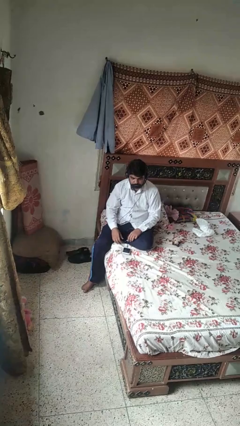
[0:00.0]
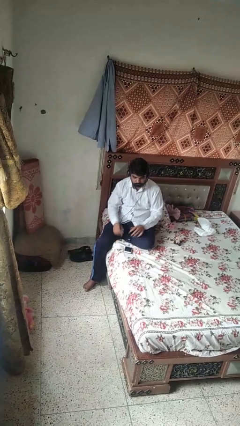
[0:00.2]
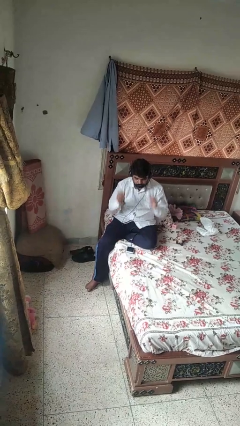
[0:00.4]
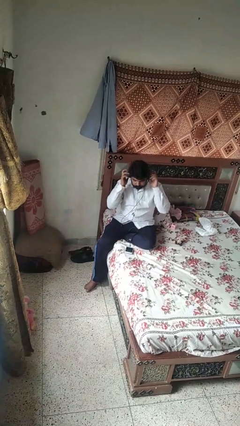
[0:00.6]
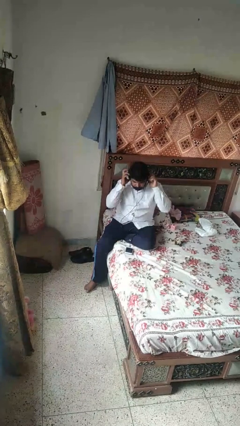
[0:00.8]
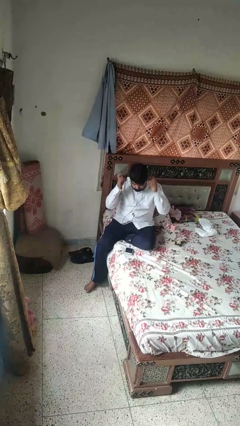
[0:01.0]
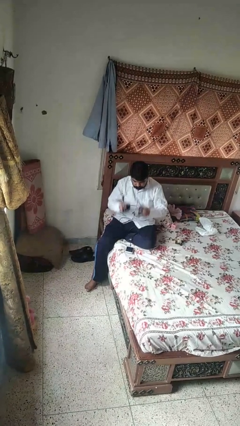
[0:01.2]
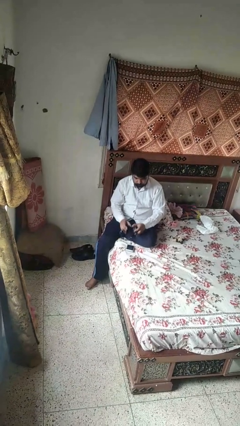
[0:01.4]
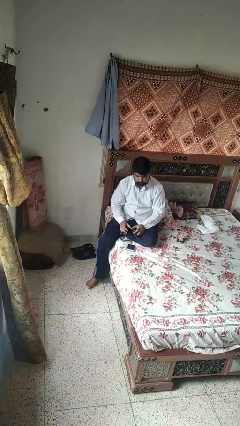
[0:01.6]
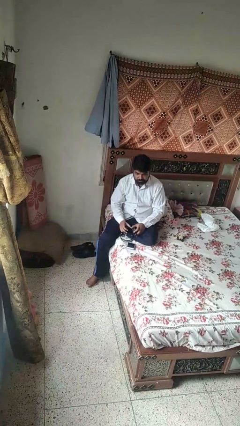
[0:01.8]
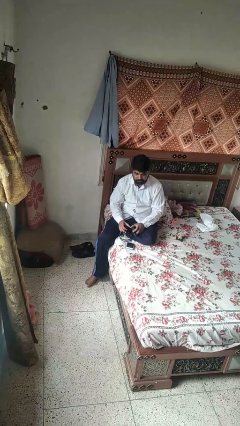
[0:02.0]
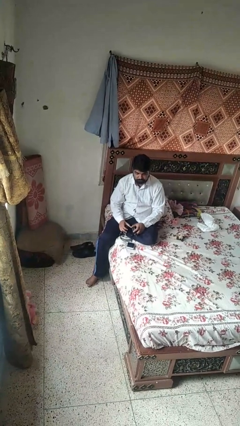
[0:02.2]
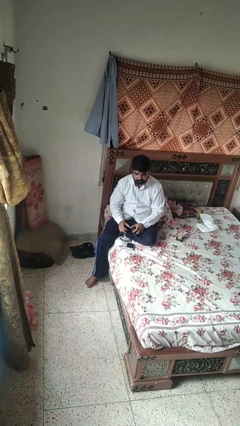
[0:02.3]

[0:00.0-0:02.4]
person takes off headphones

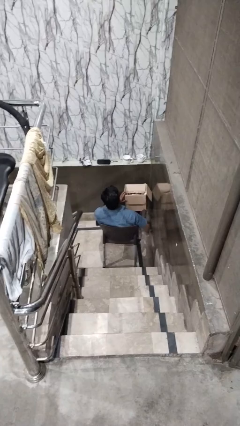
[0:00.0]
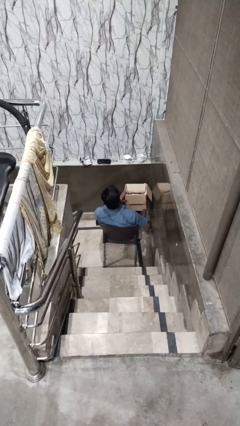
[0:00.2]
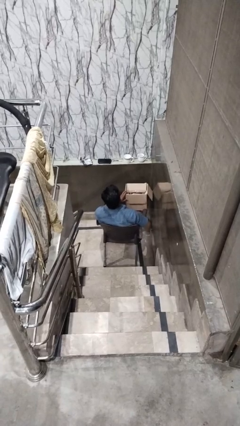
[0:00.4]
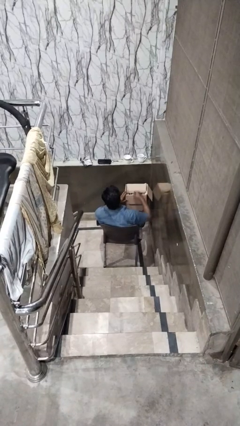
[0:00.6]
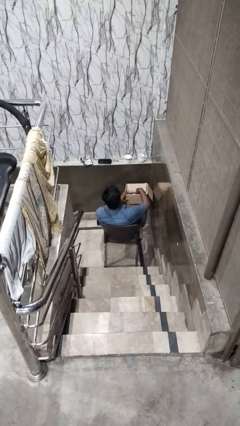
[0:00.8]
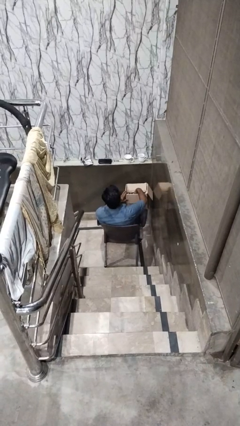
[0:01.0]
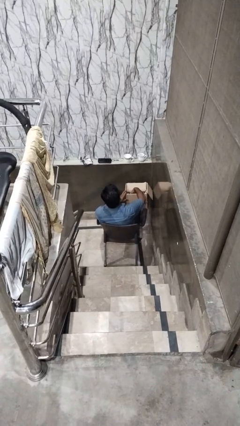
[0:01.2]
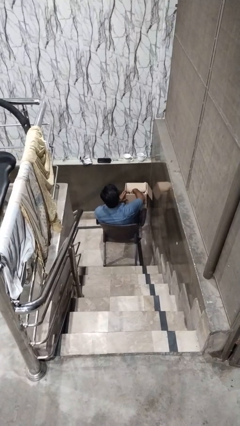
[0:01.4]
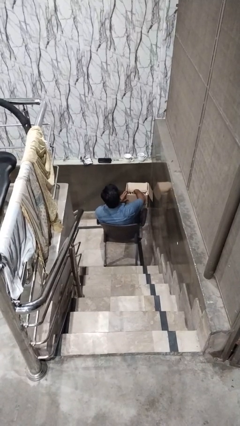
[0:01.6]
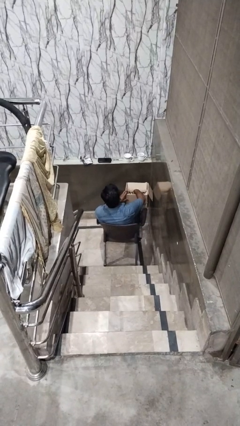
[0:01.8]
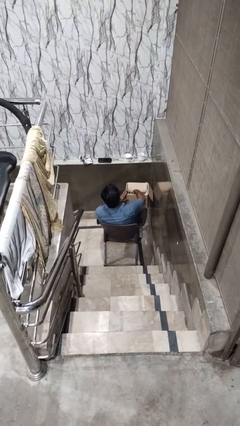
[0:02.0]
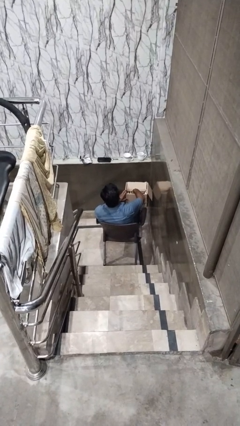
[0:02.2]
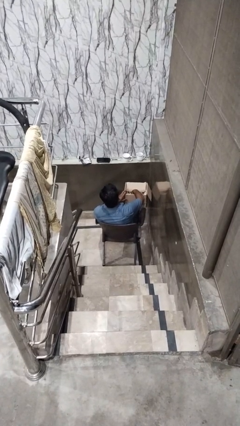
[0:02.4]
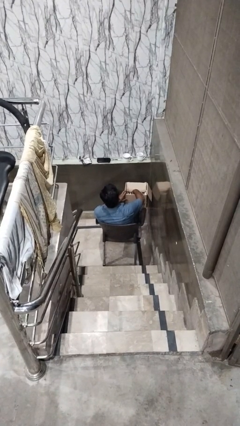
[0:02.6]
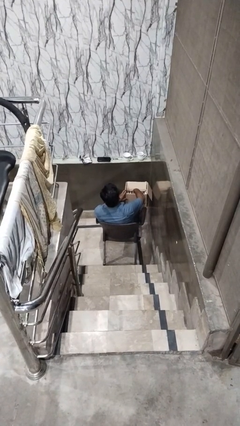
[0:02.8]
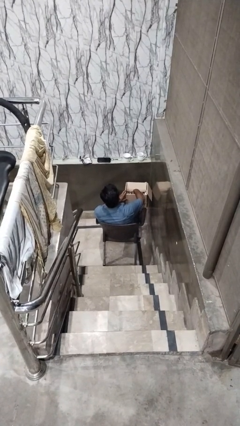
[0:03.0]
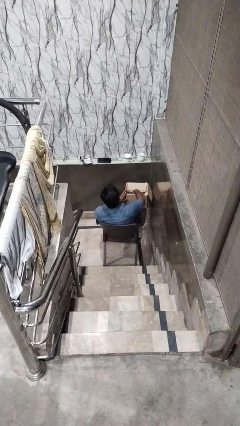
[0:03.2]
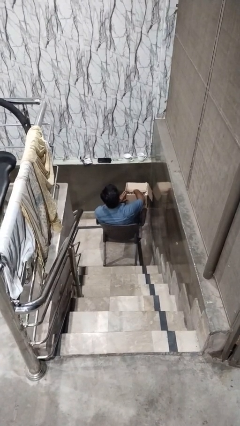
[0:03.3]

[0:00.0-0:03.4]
person searches in box

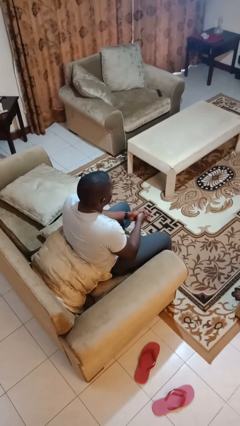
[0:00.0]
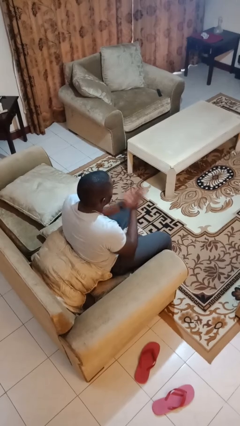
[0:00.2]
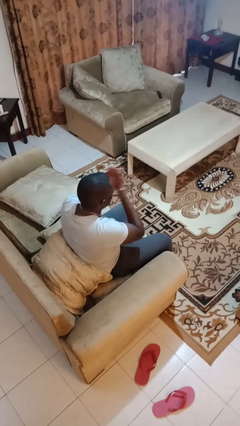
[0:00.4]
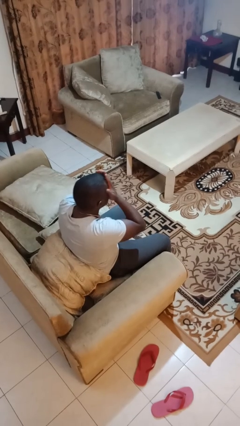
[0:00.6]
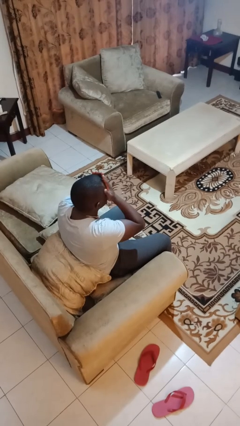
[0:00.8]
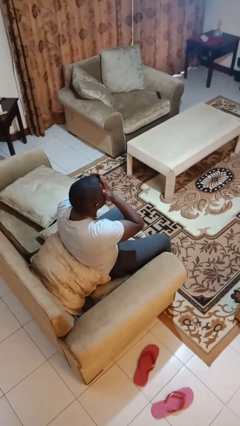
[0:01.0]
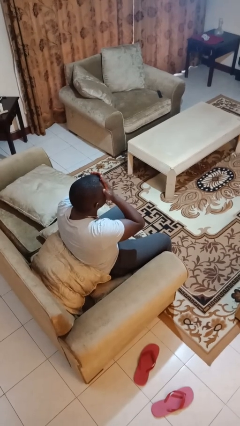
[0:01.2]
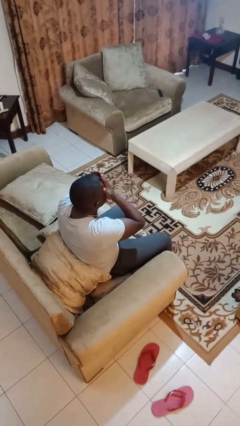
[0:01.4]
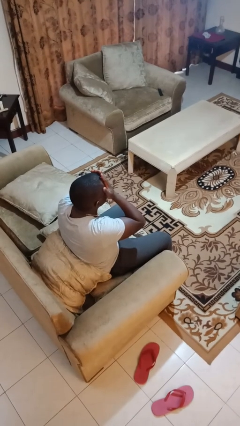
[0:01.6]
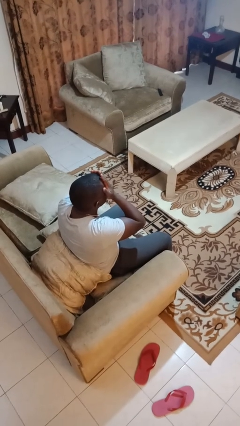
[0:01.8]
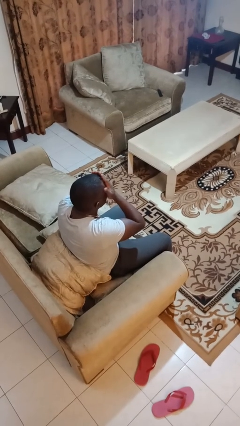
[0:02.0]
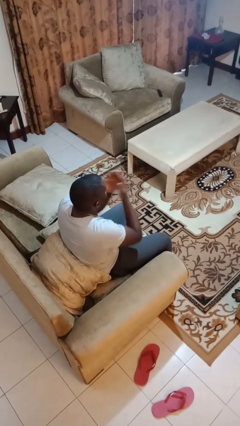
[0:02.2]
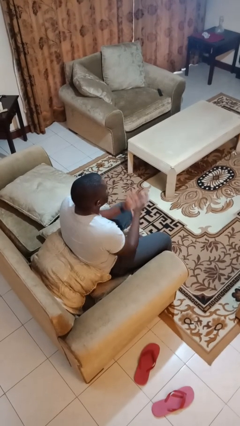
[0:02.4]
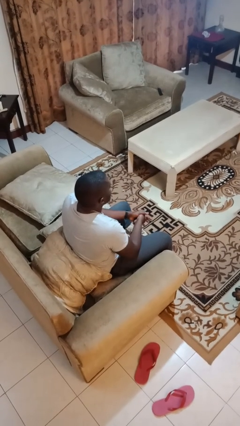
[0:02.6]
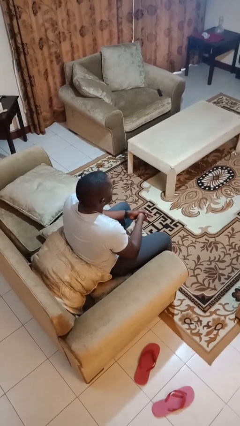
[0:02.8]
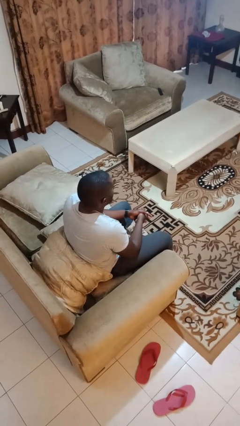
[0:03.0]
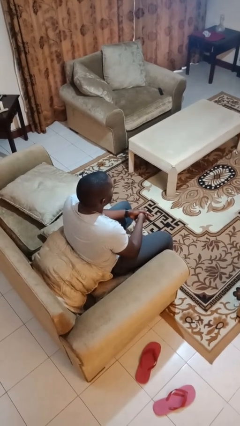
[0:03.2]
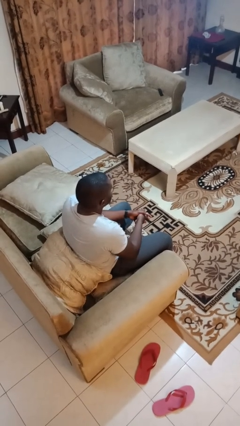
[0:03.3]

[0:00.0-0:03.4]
person covers face with hands

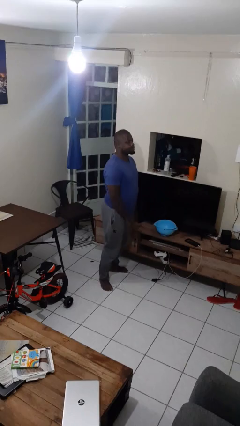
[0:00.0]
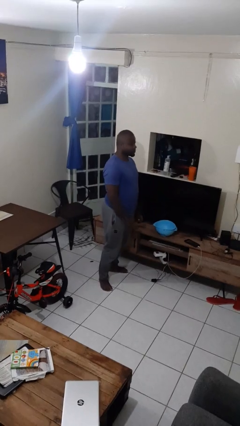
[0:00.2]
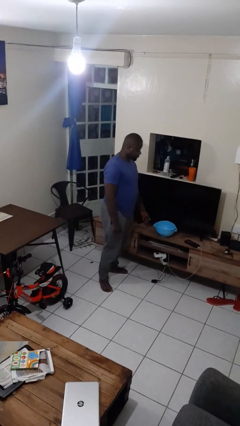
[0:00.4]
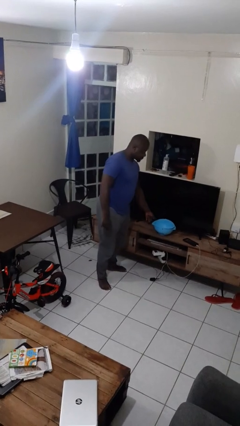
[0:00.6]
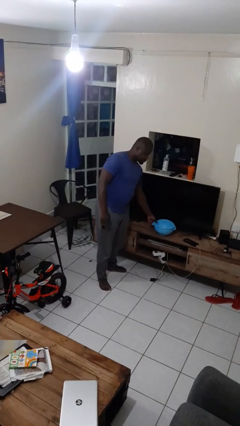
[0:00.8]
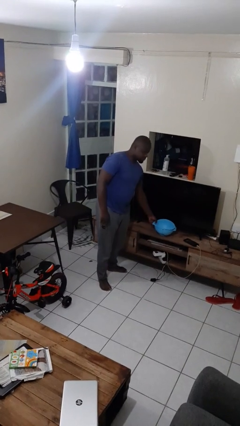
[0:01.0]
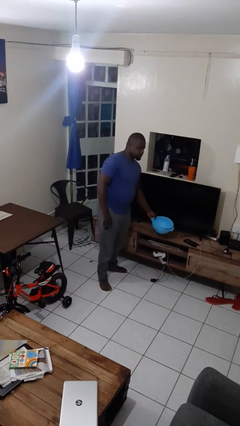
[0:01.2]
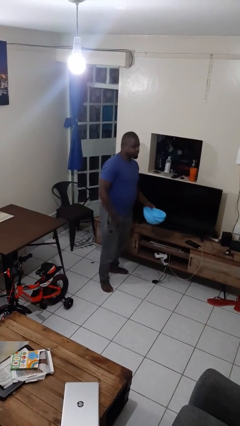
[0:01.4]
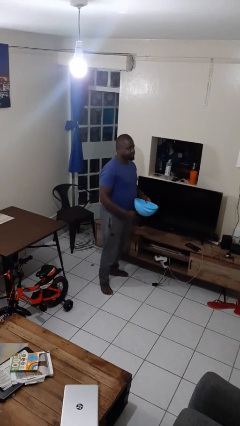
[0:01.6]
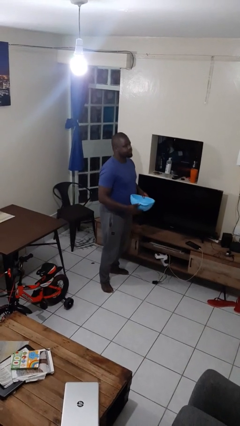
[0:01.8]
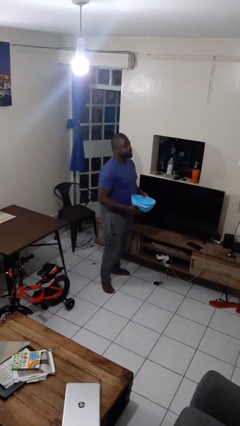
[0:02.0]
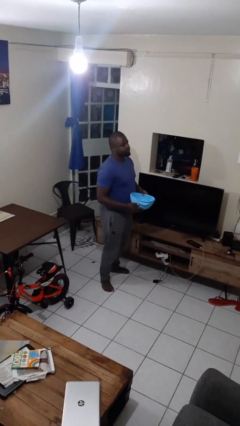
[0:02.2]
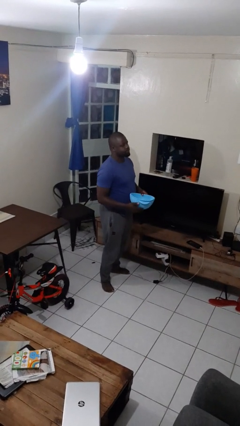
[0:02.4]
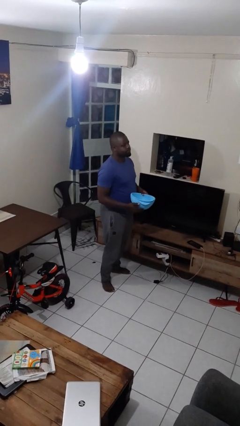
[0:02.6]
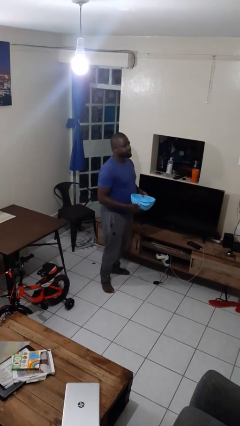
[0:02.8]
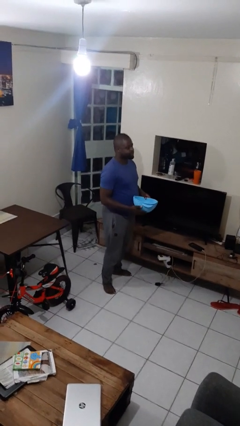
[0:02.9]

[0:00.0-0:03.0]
person picks up object from countertop

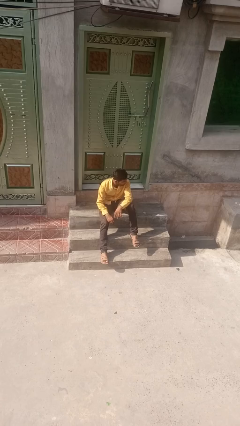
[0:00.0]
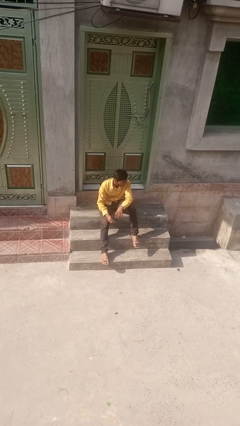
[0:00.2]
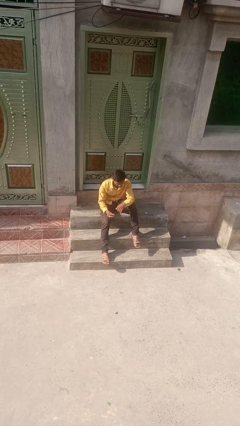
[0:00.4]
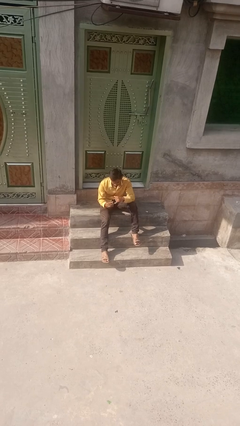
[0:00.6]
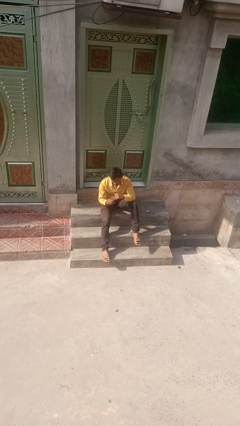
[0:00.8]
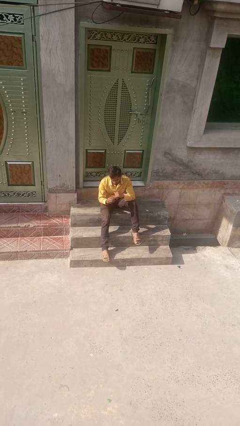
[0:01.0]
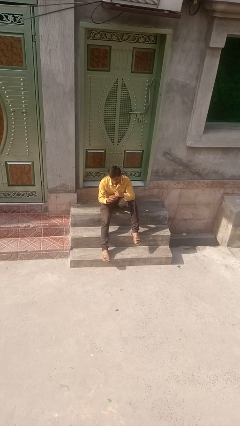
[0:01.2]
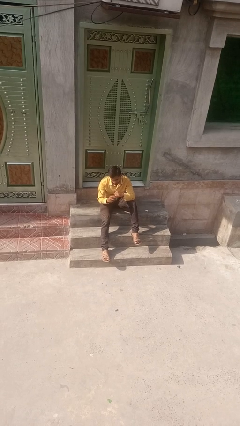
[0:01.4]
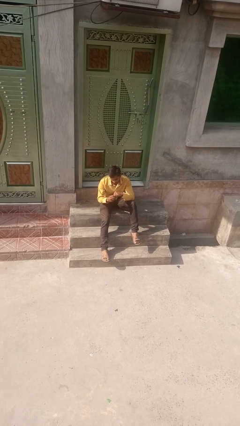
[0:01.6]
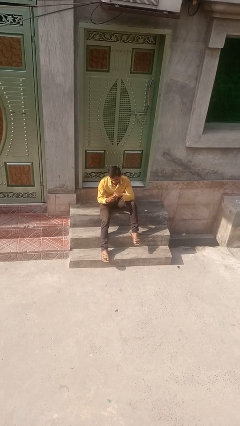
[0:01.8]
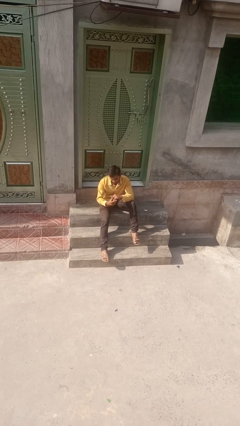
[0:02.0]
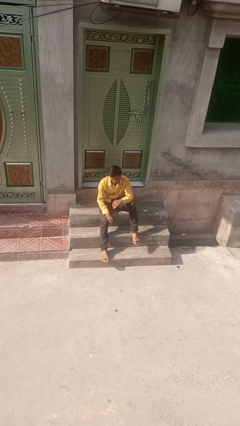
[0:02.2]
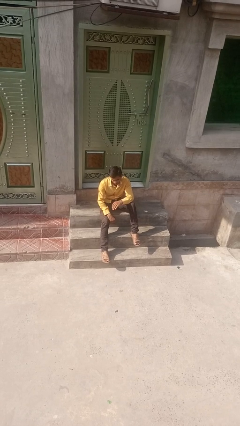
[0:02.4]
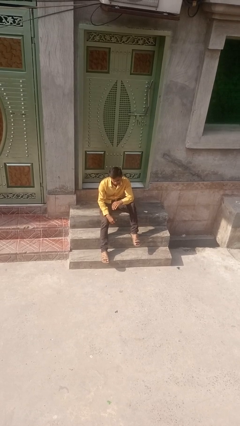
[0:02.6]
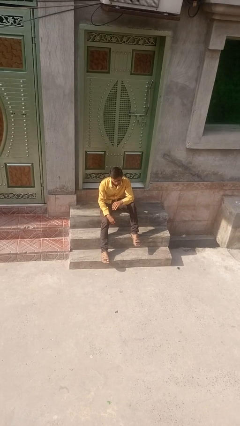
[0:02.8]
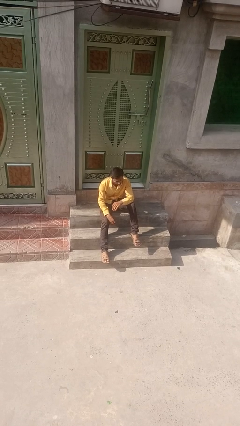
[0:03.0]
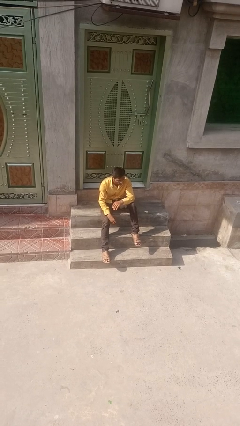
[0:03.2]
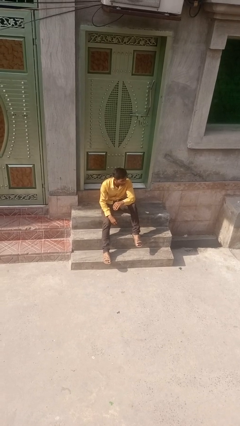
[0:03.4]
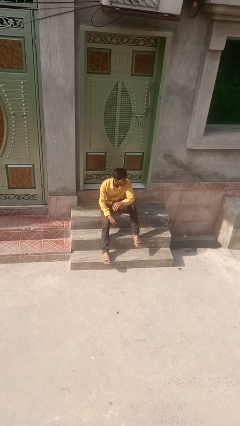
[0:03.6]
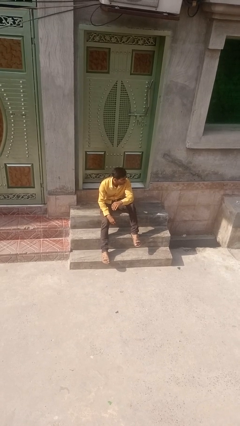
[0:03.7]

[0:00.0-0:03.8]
person puts on ring

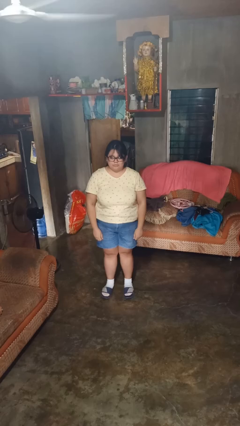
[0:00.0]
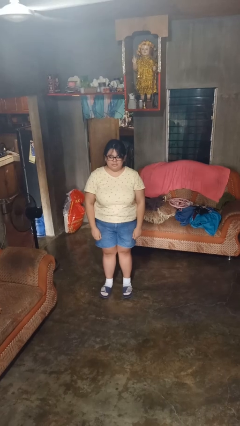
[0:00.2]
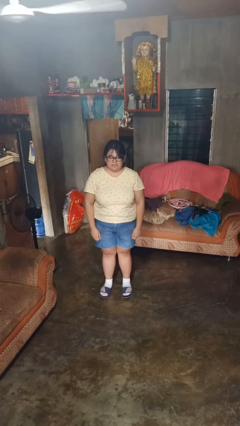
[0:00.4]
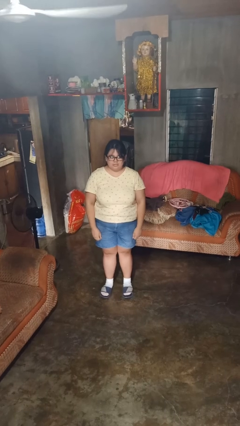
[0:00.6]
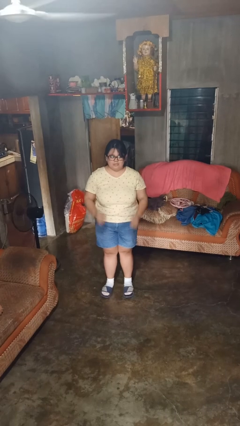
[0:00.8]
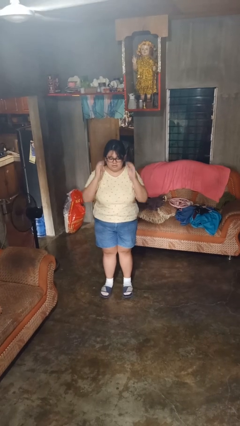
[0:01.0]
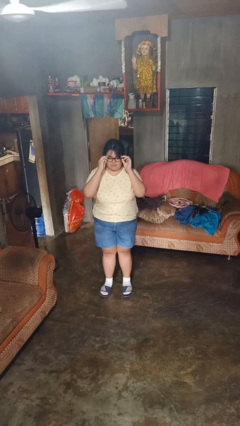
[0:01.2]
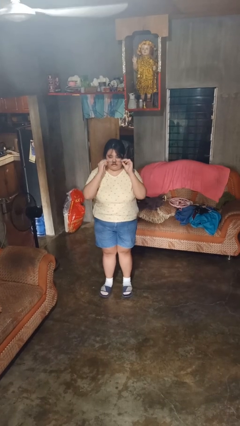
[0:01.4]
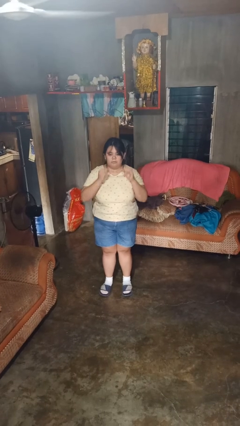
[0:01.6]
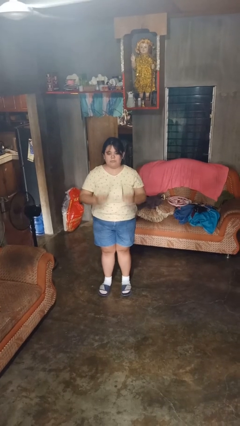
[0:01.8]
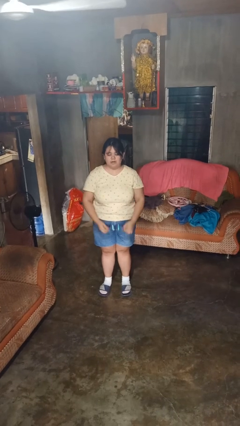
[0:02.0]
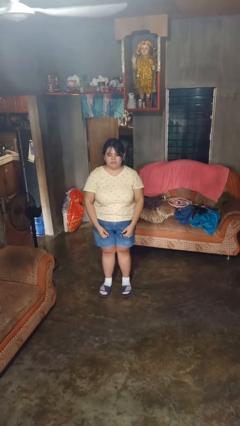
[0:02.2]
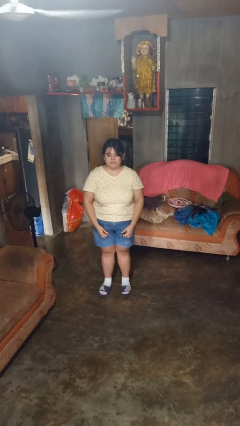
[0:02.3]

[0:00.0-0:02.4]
person takes off glasses
